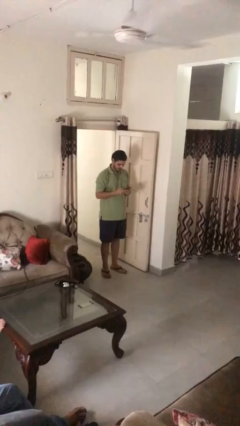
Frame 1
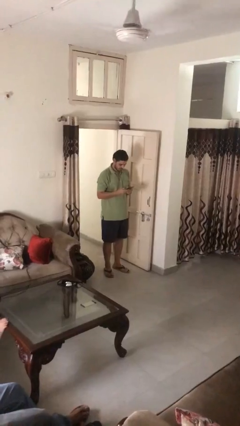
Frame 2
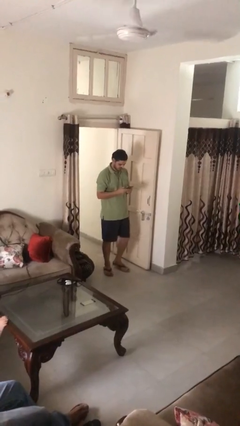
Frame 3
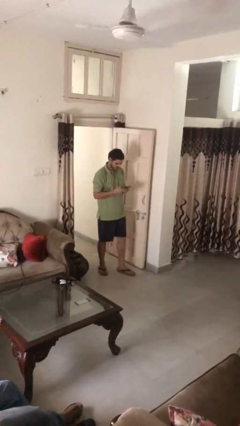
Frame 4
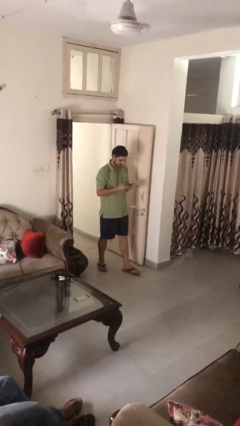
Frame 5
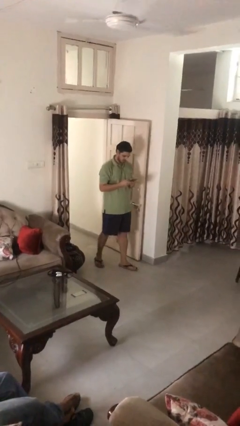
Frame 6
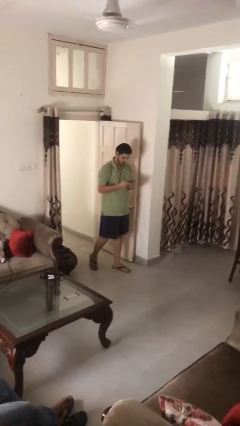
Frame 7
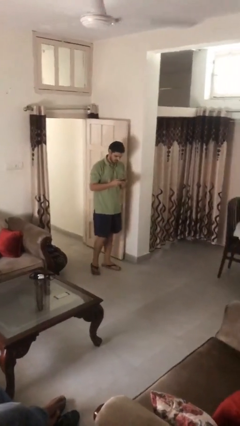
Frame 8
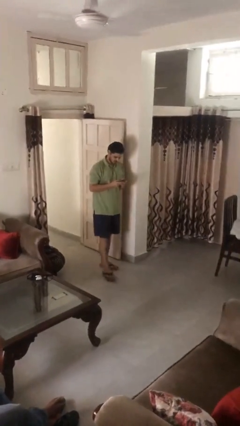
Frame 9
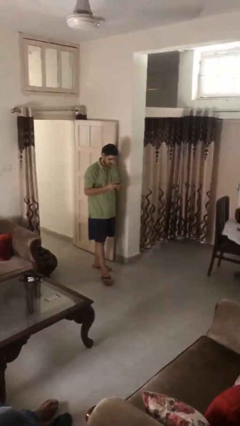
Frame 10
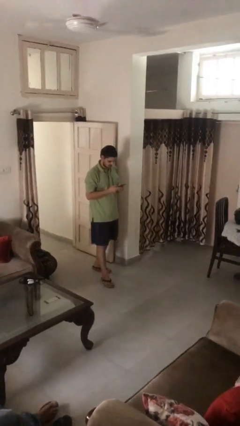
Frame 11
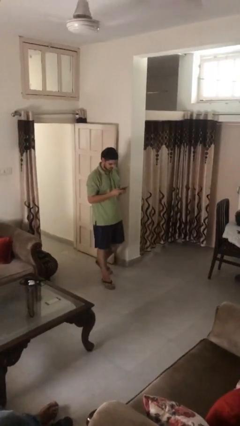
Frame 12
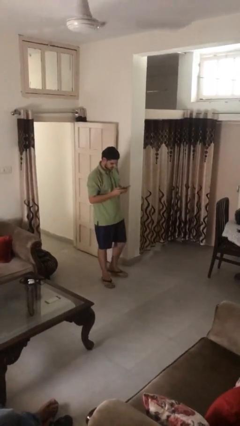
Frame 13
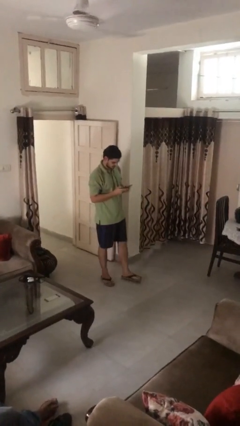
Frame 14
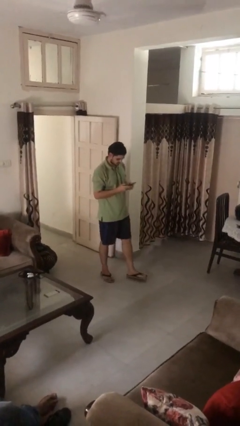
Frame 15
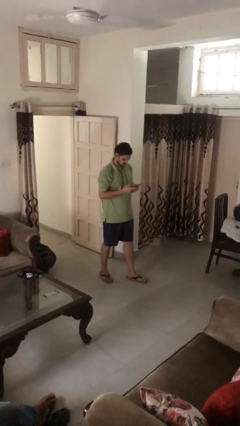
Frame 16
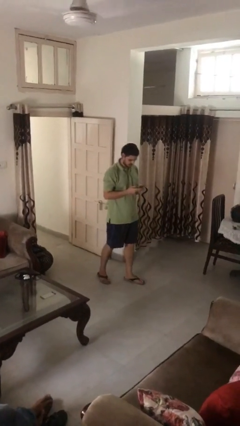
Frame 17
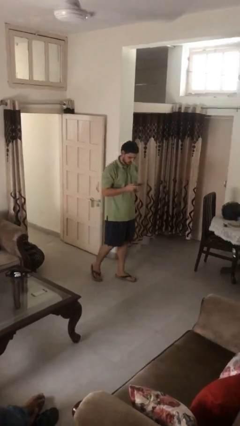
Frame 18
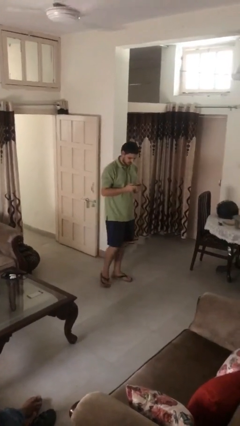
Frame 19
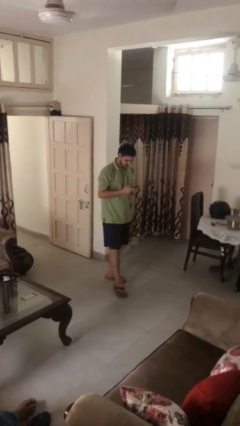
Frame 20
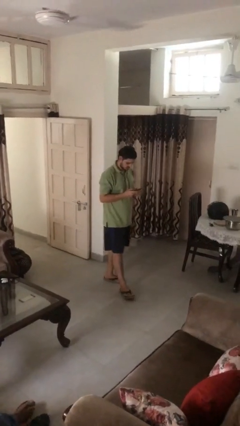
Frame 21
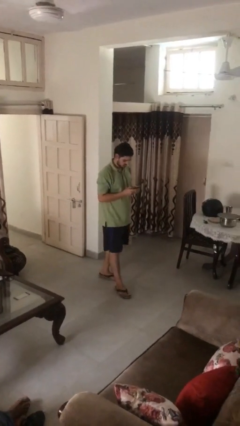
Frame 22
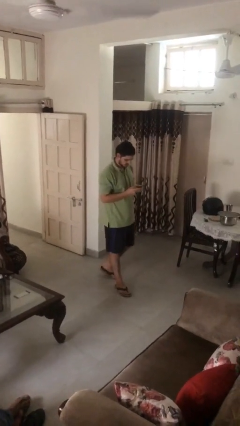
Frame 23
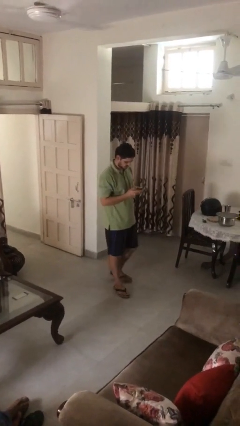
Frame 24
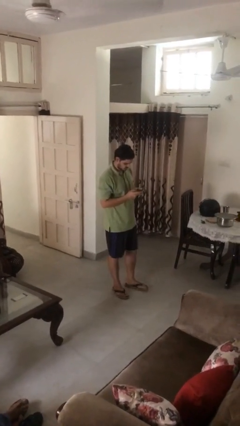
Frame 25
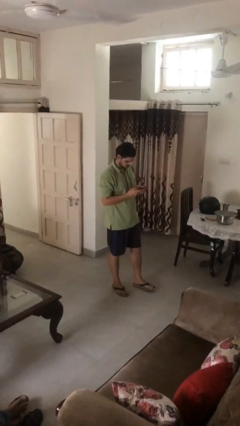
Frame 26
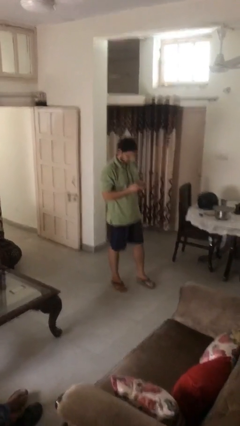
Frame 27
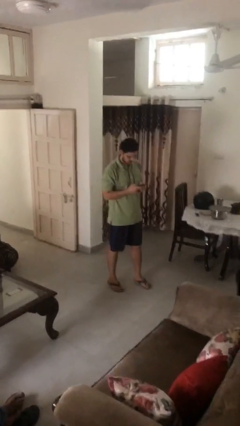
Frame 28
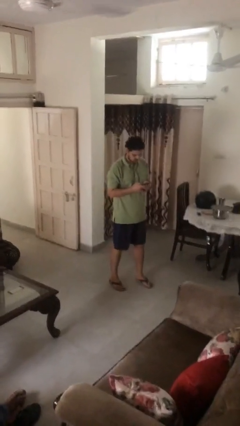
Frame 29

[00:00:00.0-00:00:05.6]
person texts on phone

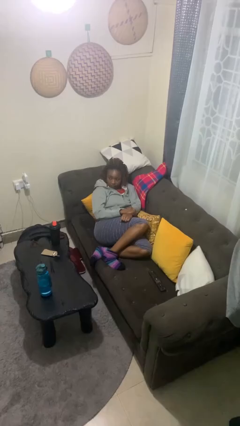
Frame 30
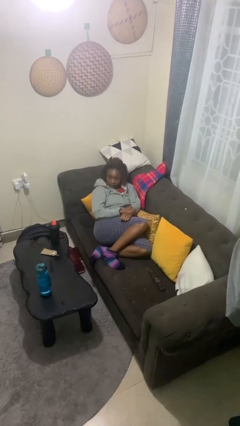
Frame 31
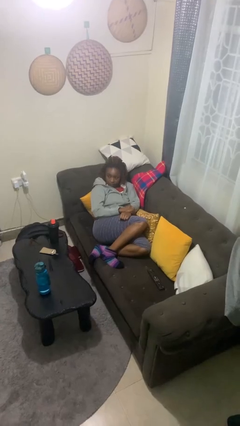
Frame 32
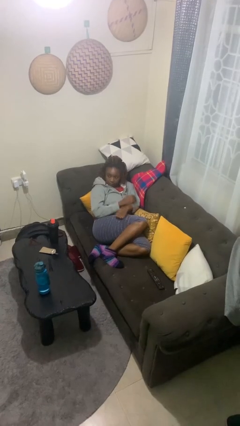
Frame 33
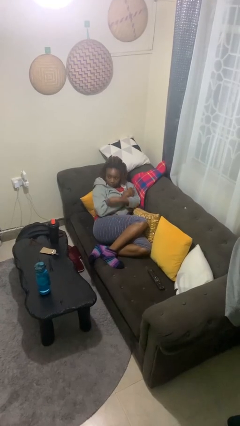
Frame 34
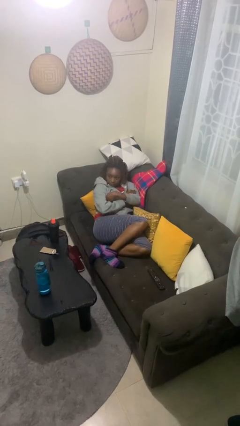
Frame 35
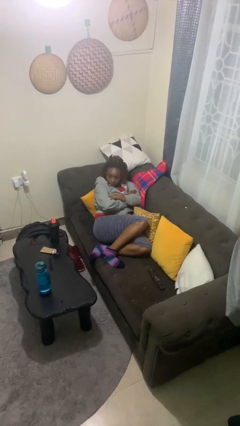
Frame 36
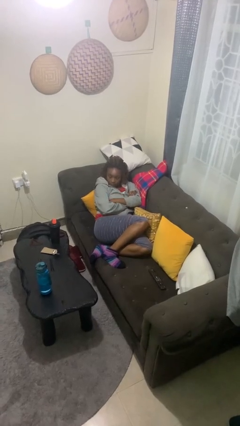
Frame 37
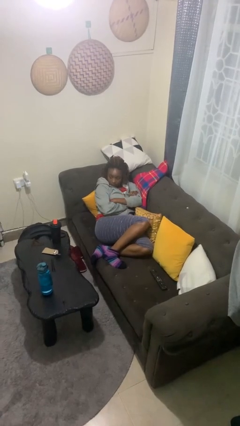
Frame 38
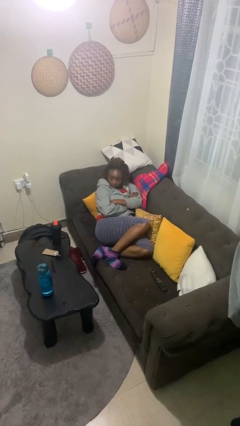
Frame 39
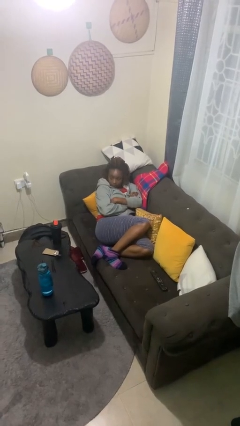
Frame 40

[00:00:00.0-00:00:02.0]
person crosses arms

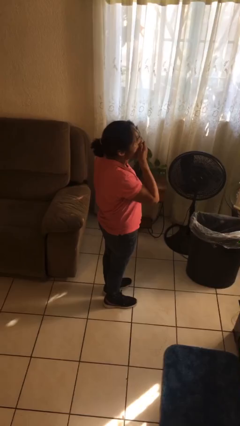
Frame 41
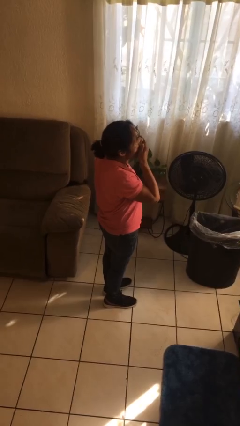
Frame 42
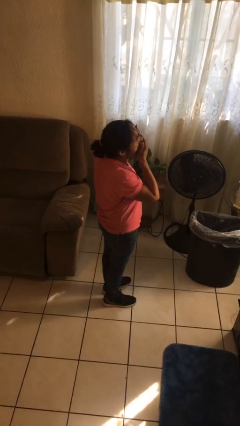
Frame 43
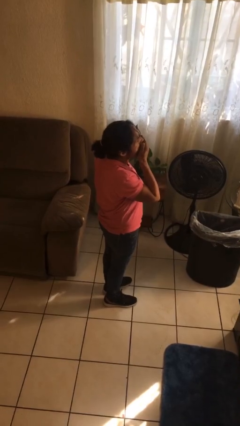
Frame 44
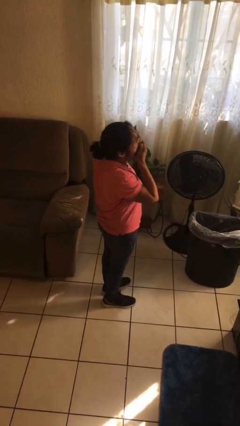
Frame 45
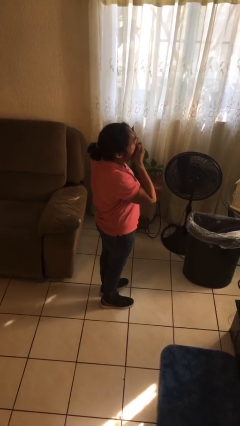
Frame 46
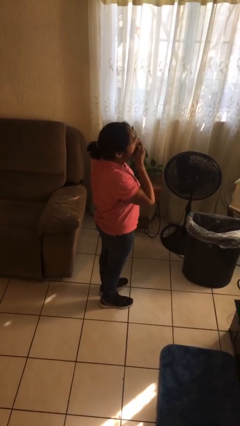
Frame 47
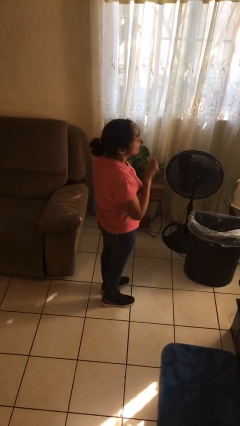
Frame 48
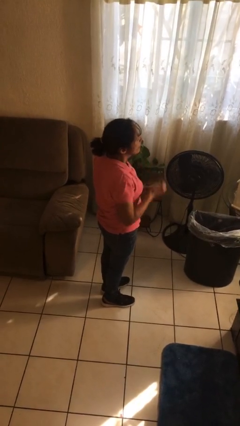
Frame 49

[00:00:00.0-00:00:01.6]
person yawns

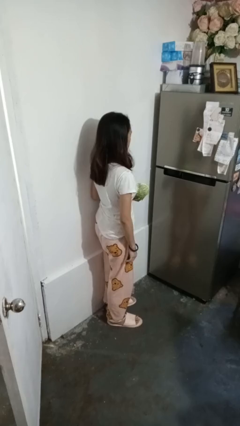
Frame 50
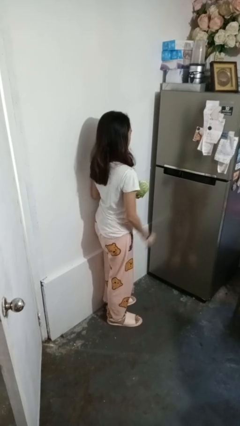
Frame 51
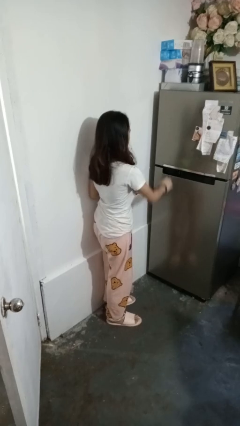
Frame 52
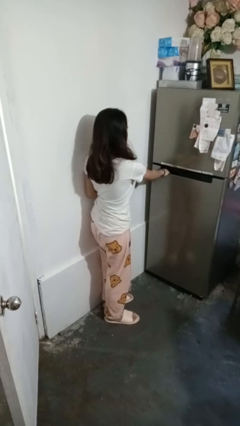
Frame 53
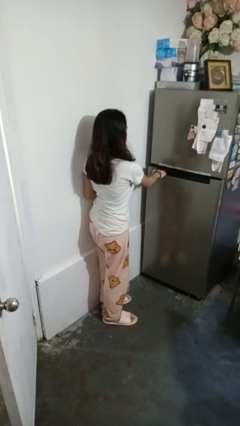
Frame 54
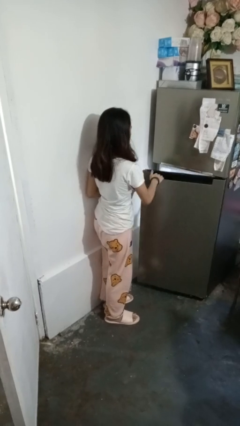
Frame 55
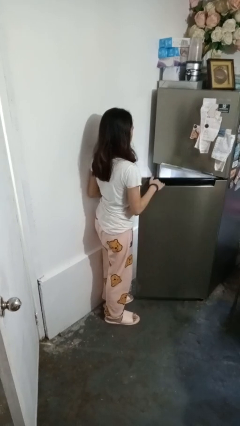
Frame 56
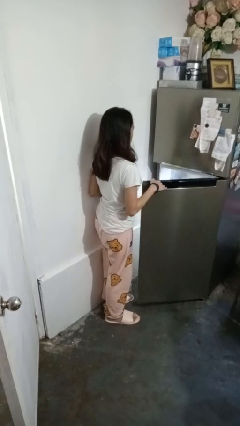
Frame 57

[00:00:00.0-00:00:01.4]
person opens refrigerator

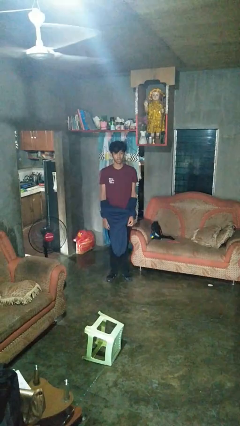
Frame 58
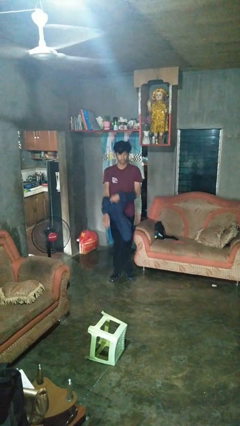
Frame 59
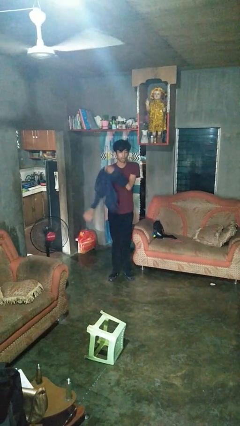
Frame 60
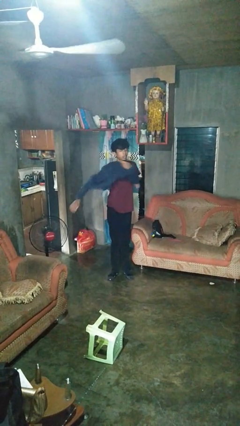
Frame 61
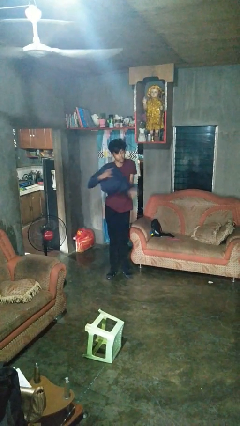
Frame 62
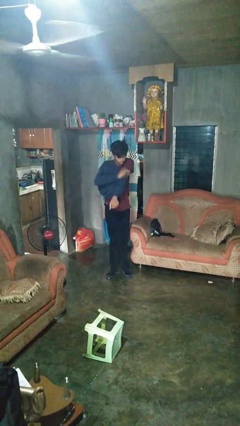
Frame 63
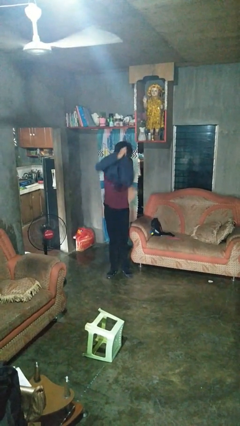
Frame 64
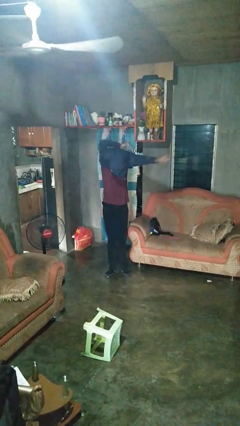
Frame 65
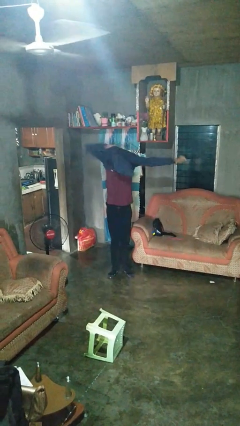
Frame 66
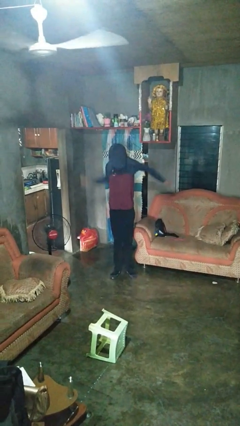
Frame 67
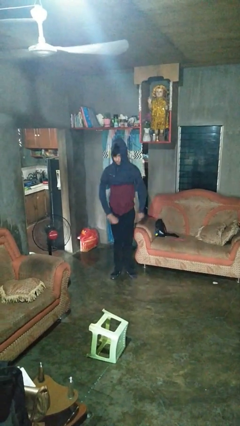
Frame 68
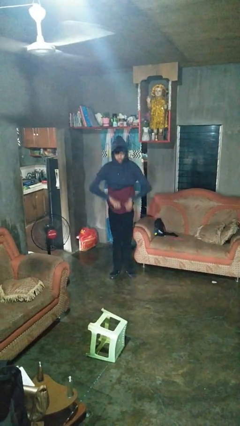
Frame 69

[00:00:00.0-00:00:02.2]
person puts on hoodie

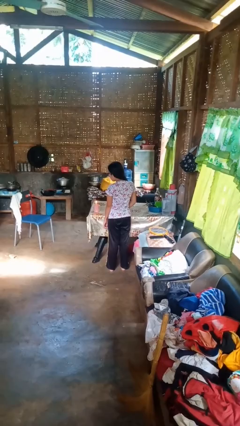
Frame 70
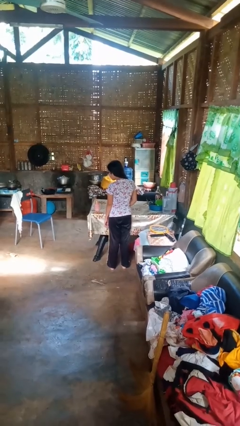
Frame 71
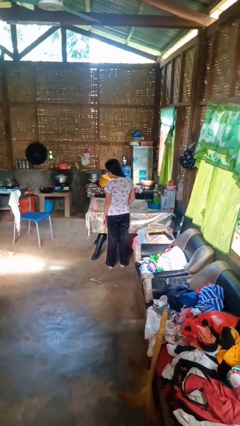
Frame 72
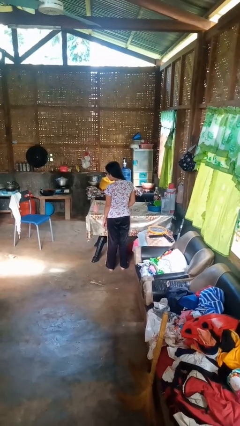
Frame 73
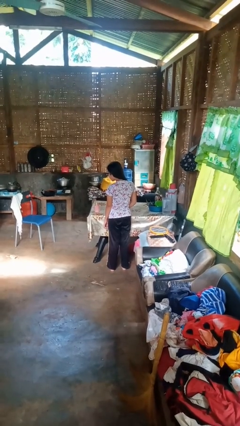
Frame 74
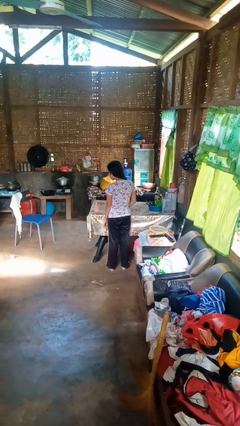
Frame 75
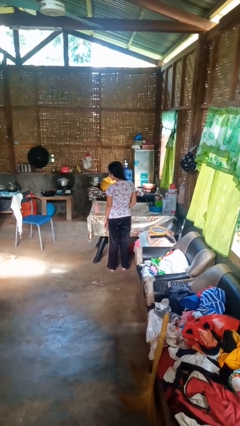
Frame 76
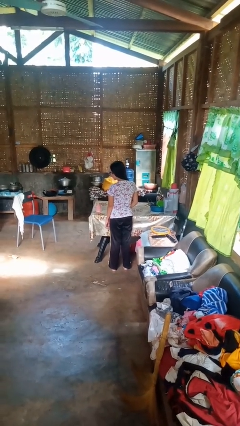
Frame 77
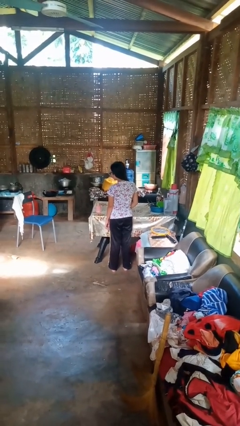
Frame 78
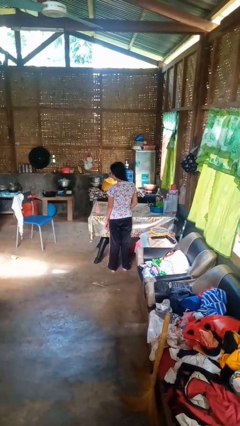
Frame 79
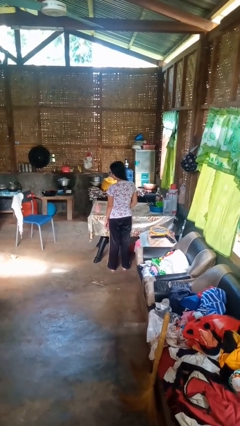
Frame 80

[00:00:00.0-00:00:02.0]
person extinguishes candle

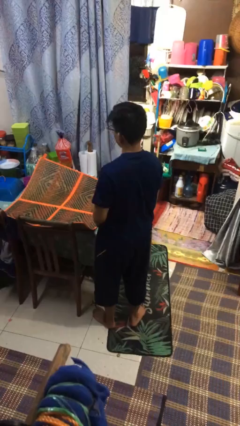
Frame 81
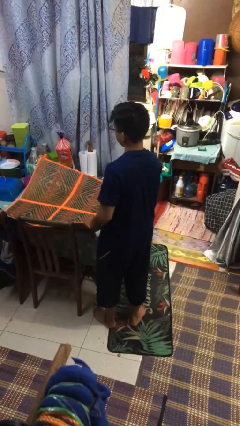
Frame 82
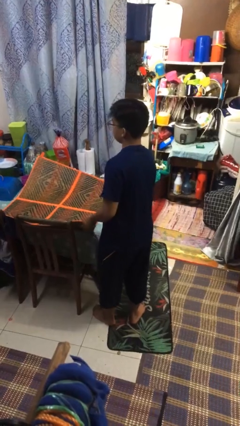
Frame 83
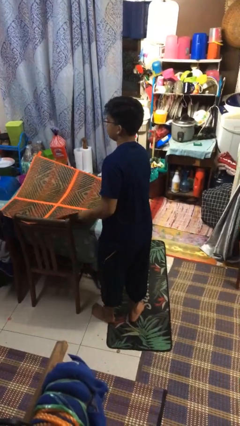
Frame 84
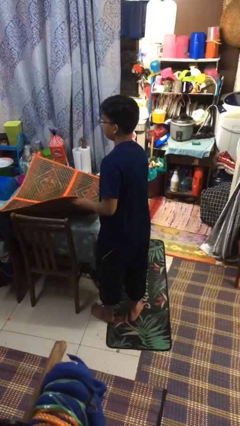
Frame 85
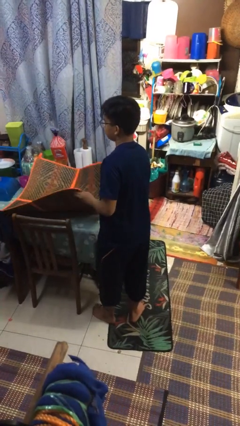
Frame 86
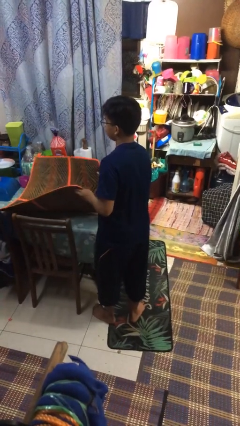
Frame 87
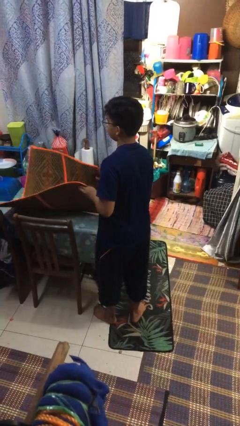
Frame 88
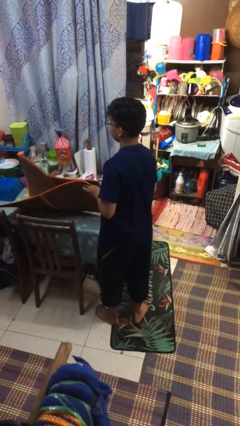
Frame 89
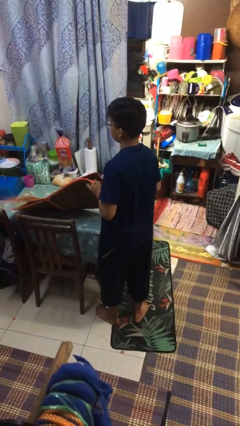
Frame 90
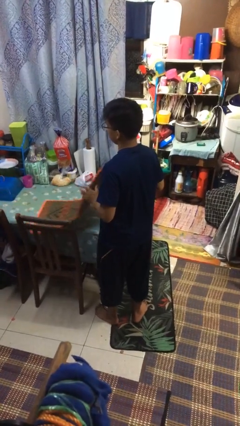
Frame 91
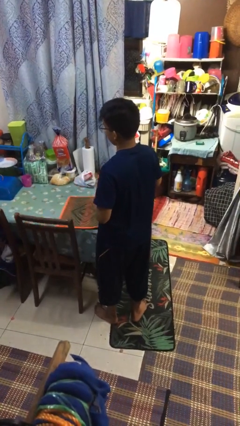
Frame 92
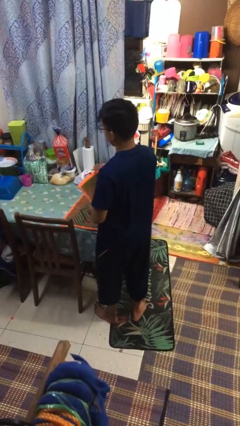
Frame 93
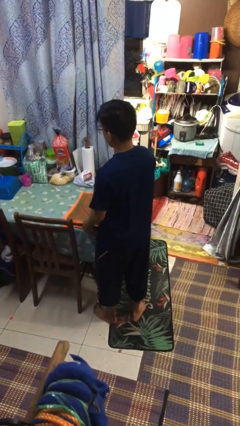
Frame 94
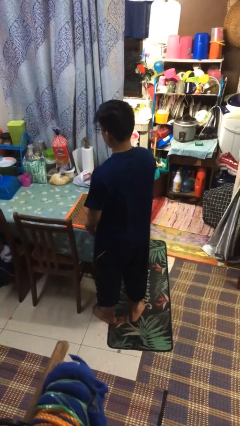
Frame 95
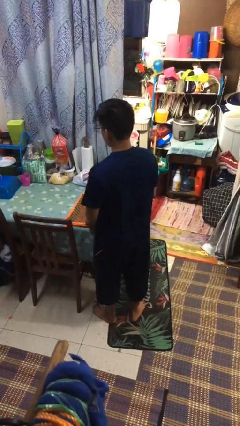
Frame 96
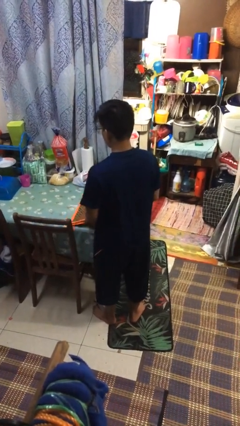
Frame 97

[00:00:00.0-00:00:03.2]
person folds tablecloth
